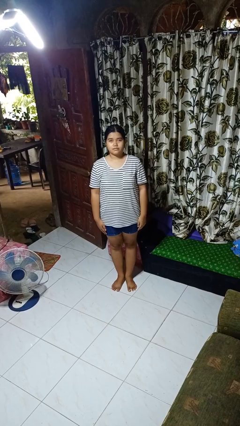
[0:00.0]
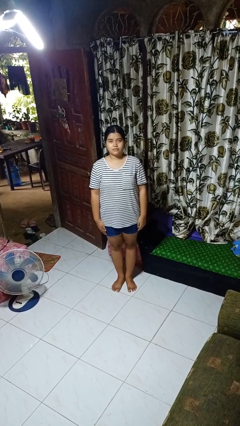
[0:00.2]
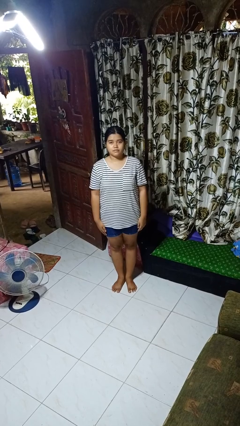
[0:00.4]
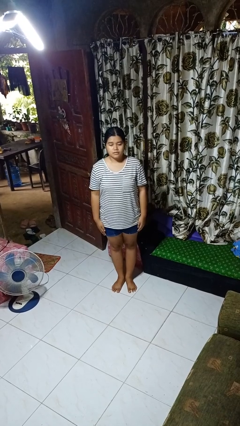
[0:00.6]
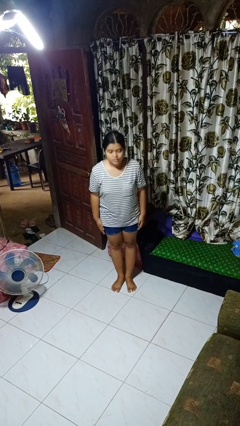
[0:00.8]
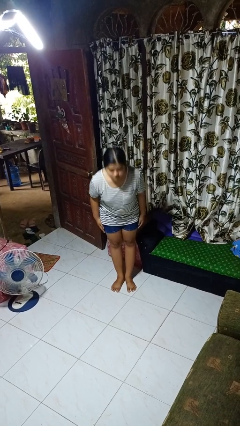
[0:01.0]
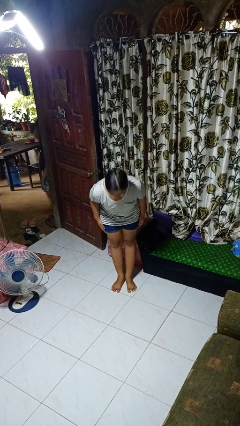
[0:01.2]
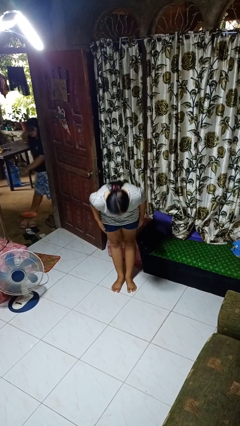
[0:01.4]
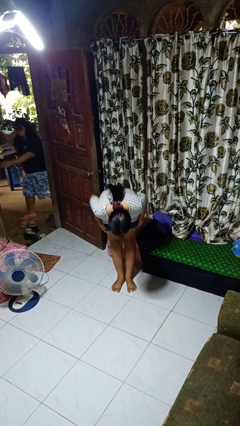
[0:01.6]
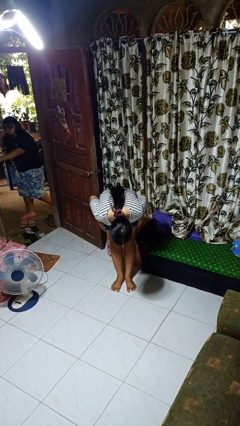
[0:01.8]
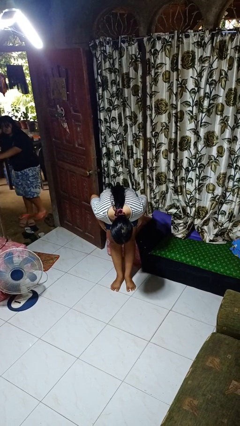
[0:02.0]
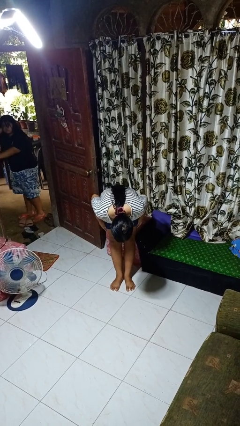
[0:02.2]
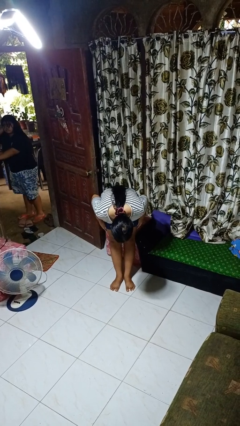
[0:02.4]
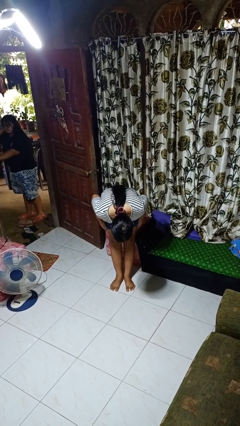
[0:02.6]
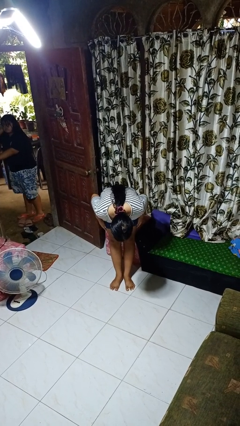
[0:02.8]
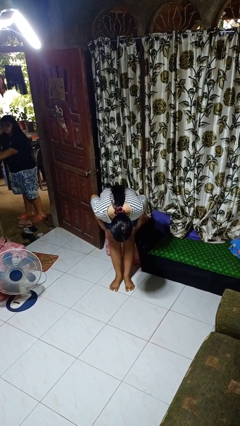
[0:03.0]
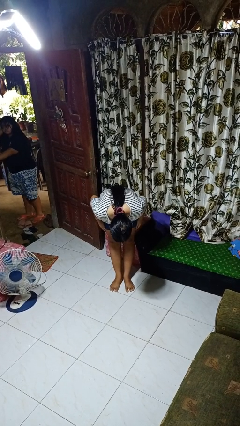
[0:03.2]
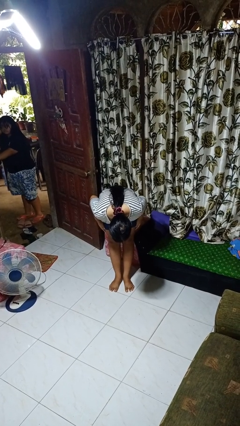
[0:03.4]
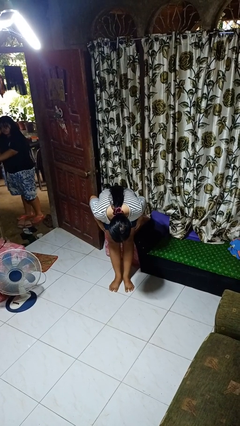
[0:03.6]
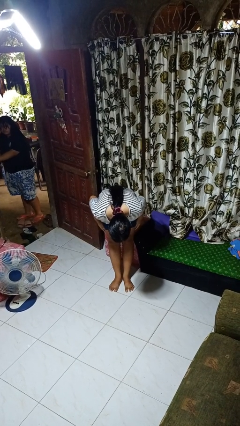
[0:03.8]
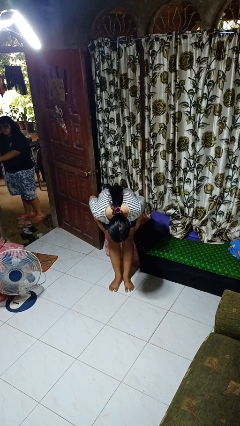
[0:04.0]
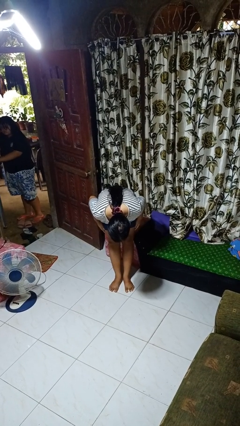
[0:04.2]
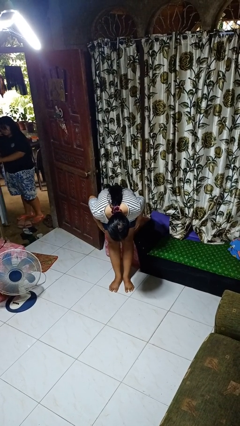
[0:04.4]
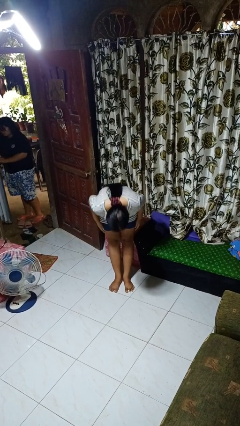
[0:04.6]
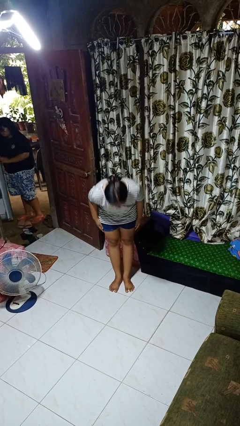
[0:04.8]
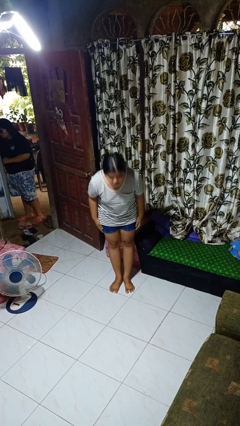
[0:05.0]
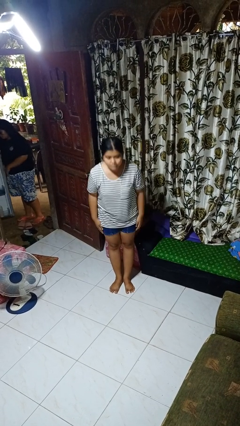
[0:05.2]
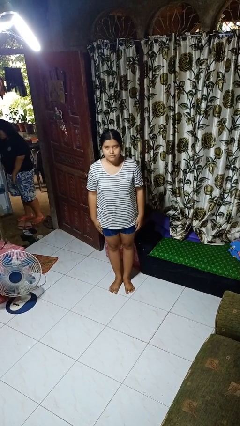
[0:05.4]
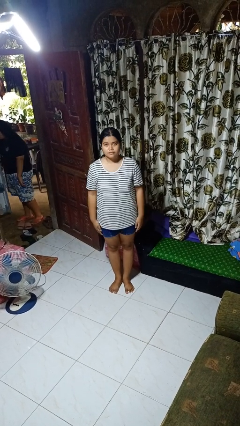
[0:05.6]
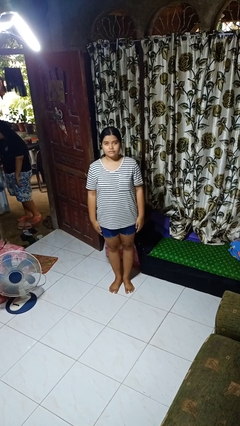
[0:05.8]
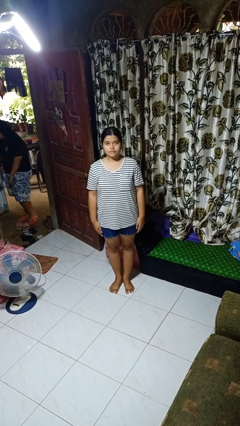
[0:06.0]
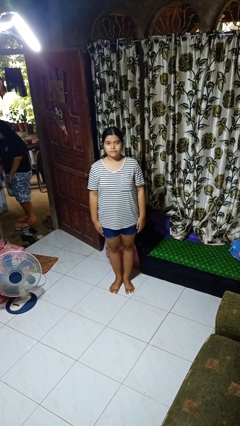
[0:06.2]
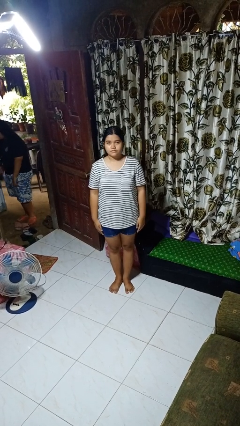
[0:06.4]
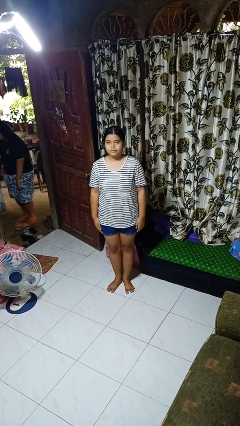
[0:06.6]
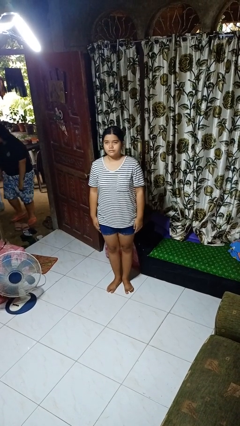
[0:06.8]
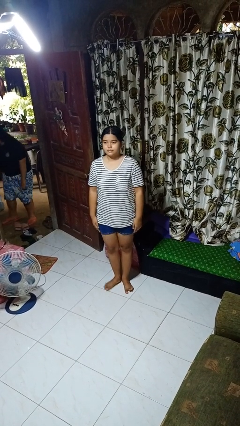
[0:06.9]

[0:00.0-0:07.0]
person bows

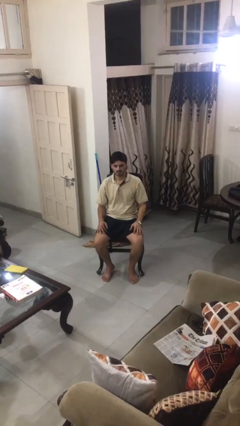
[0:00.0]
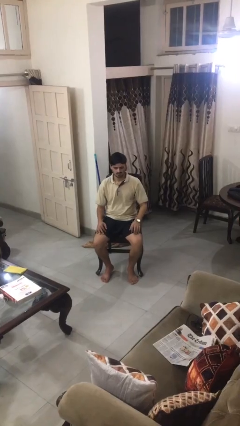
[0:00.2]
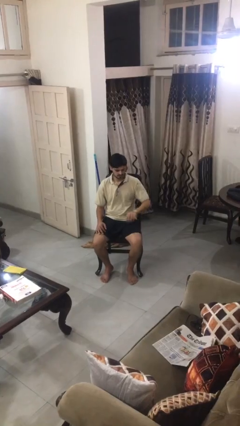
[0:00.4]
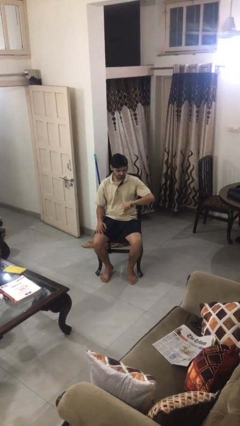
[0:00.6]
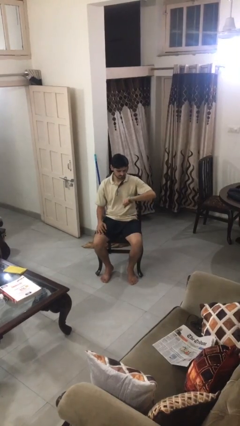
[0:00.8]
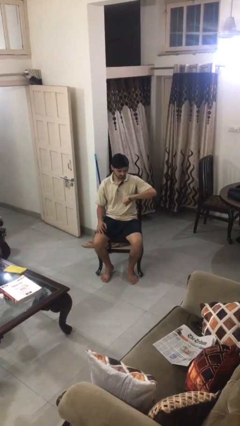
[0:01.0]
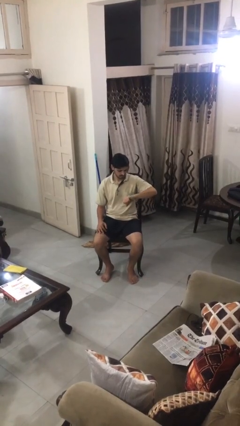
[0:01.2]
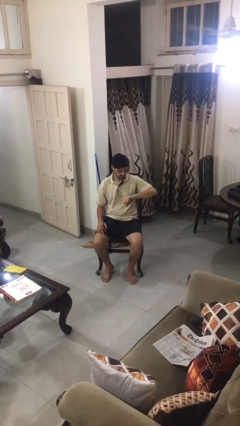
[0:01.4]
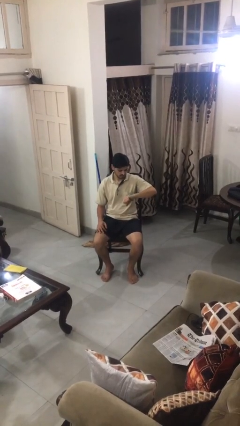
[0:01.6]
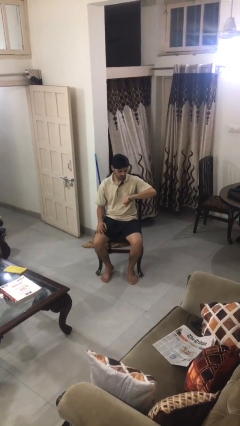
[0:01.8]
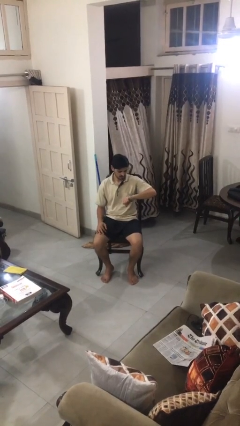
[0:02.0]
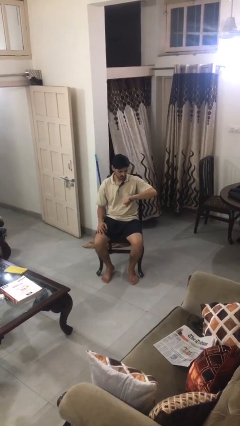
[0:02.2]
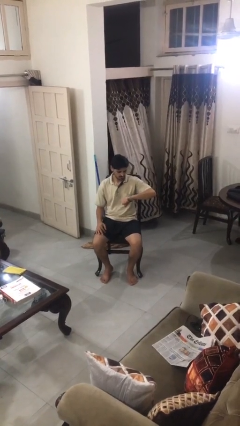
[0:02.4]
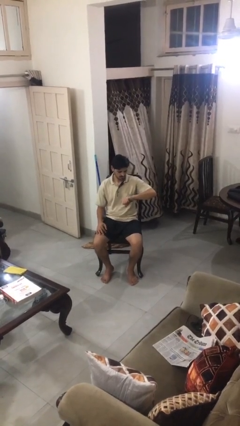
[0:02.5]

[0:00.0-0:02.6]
person looks at wristwatch

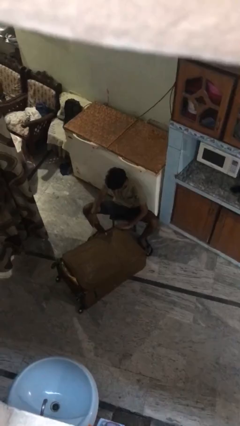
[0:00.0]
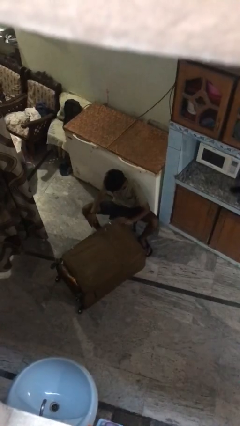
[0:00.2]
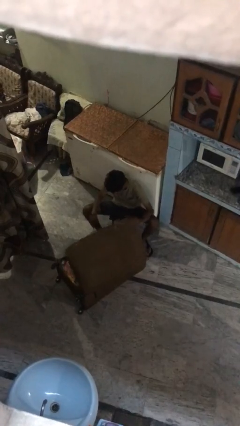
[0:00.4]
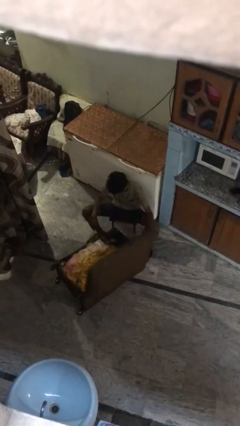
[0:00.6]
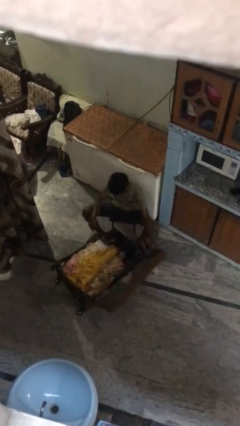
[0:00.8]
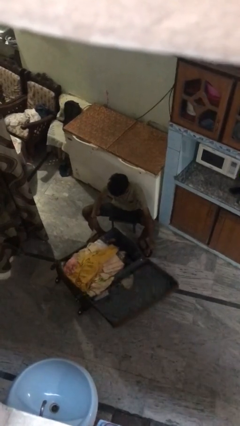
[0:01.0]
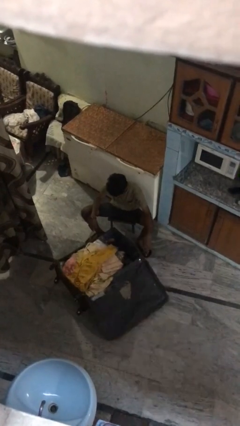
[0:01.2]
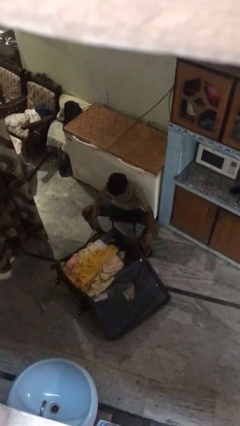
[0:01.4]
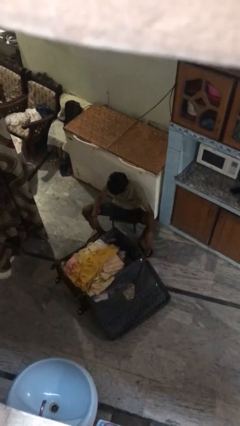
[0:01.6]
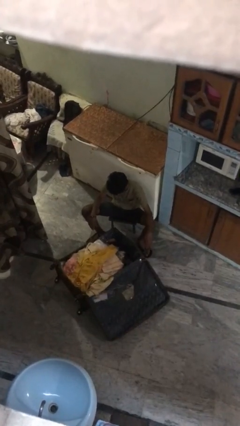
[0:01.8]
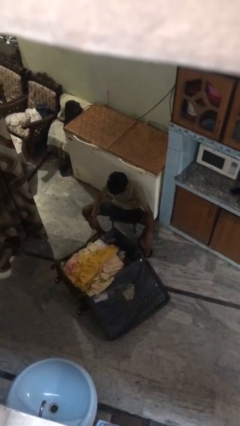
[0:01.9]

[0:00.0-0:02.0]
person opens suitcase

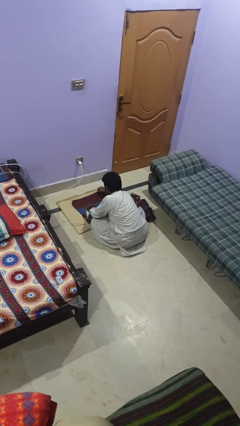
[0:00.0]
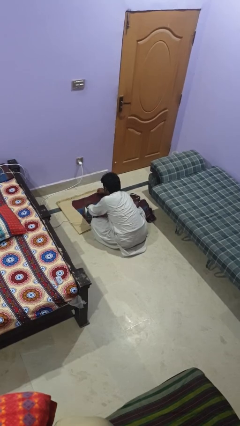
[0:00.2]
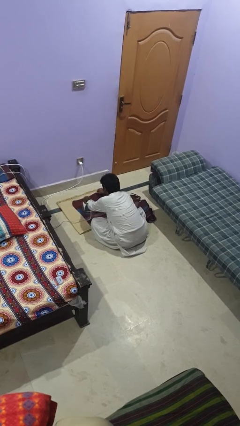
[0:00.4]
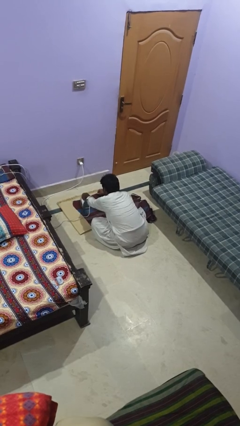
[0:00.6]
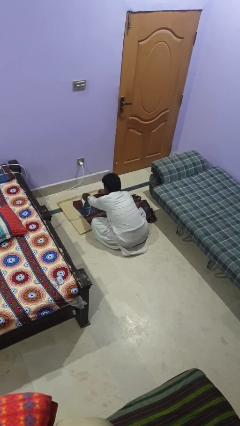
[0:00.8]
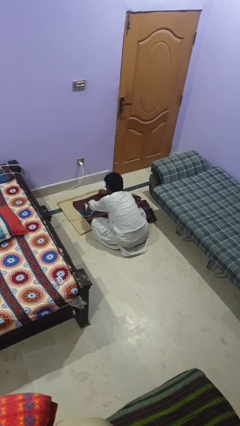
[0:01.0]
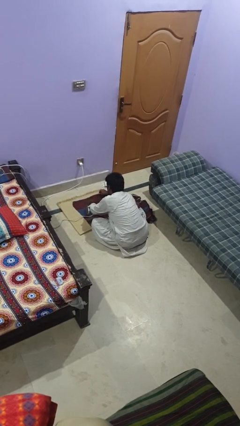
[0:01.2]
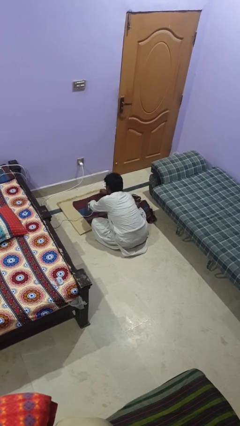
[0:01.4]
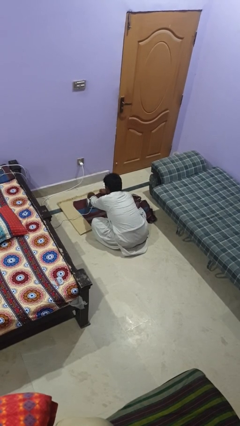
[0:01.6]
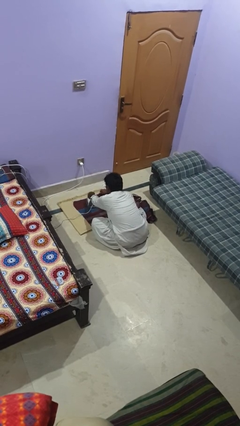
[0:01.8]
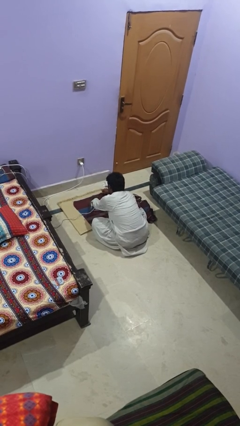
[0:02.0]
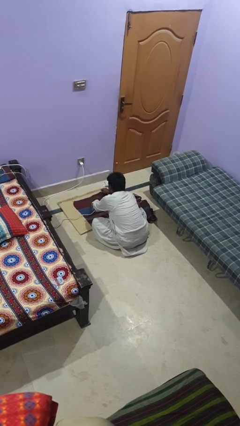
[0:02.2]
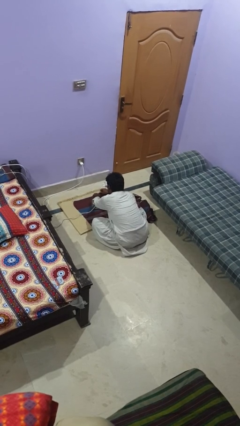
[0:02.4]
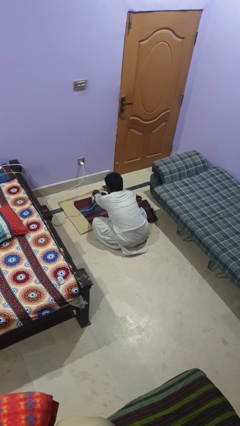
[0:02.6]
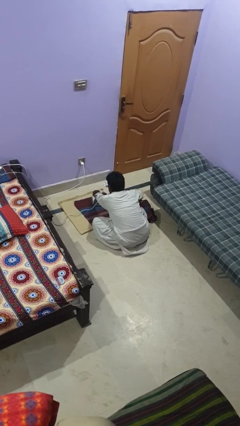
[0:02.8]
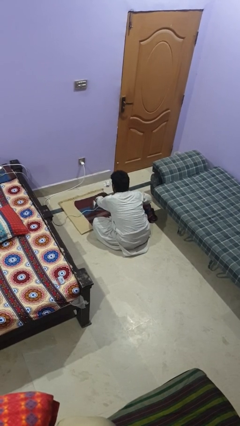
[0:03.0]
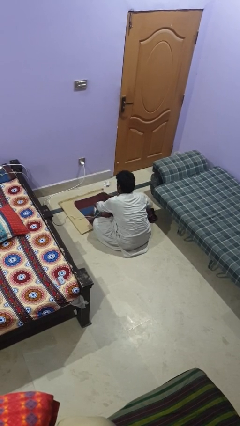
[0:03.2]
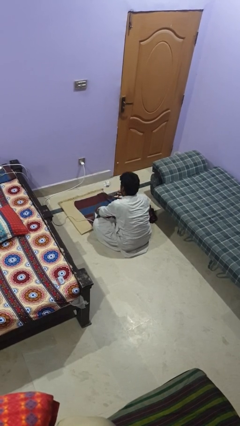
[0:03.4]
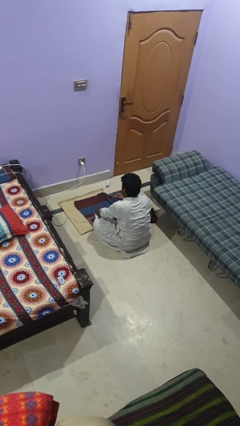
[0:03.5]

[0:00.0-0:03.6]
person irons clothes

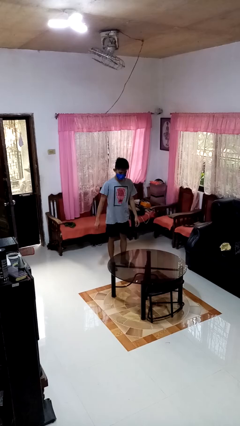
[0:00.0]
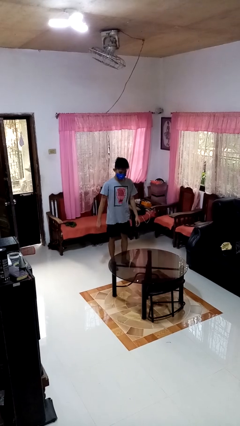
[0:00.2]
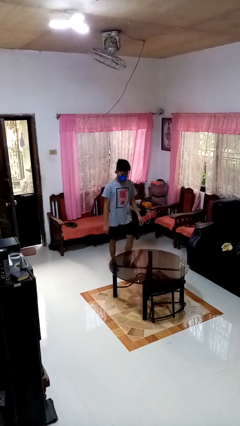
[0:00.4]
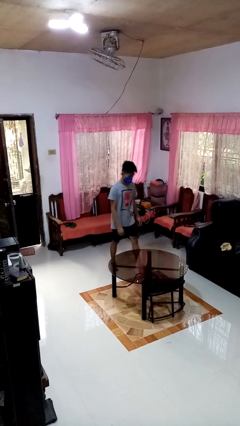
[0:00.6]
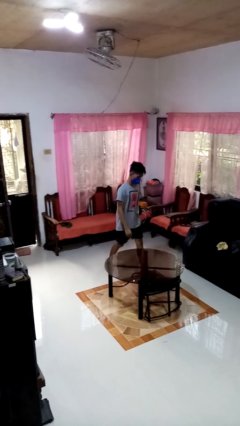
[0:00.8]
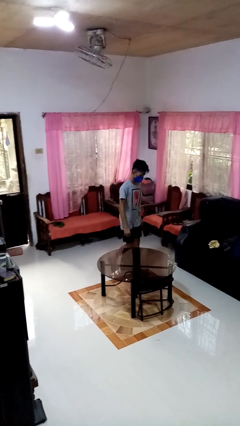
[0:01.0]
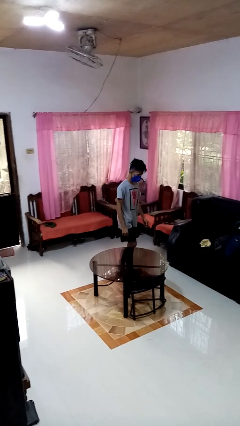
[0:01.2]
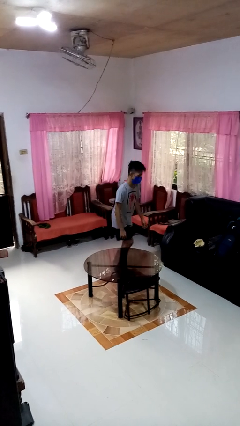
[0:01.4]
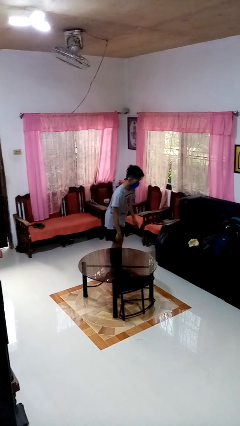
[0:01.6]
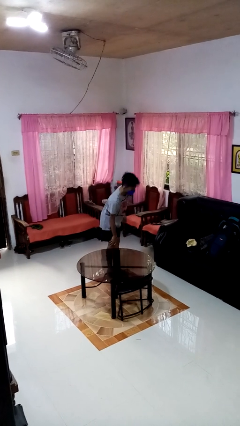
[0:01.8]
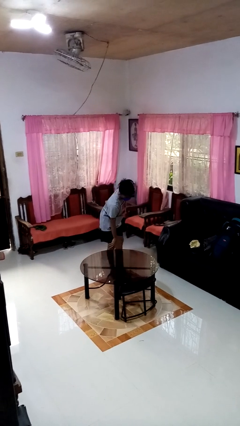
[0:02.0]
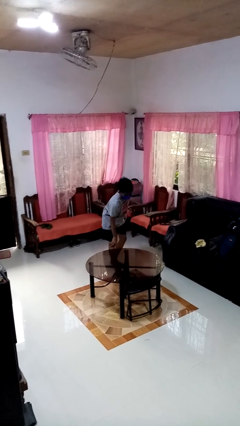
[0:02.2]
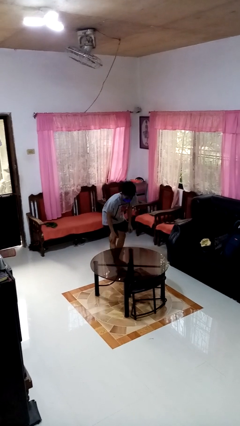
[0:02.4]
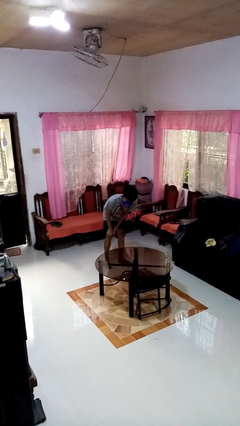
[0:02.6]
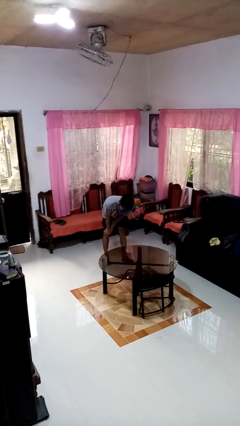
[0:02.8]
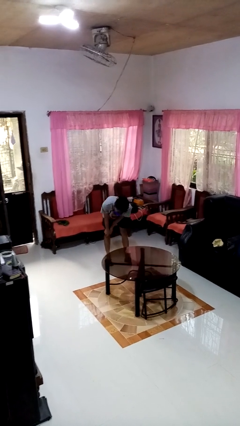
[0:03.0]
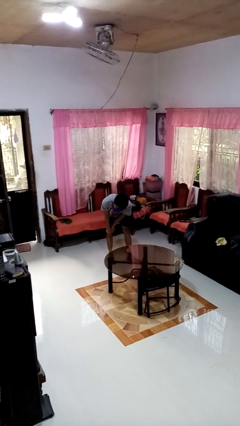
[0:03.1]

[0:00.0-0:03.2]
person bumps into table
